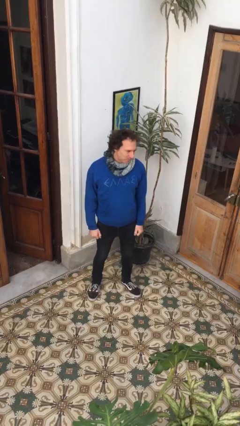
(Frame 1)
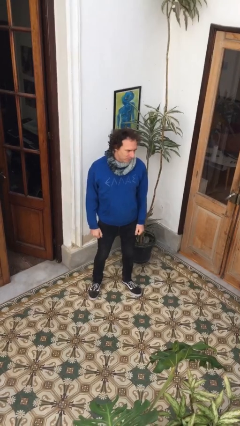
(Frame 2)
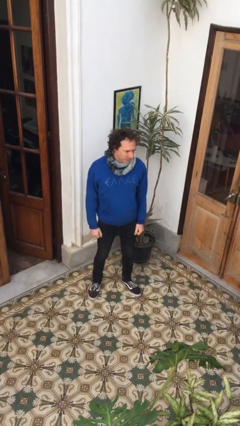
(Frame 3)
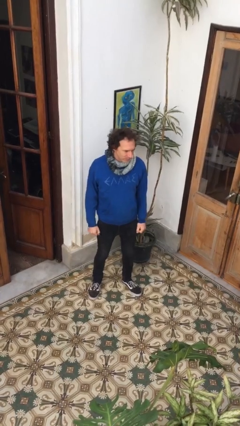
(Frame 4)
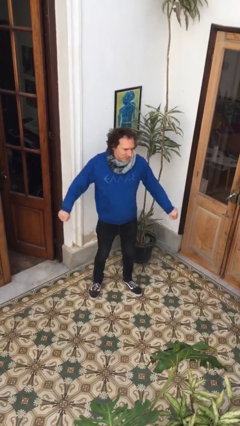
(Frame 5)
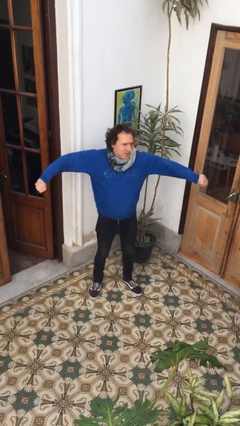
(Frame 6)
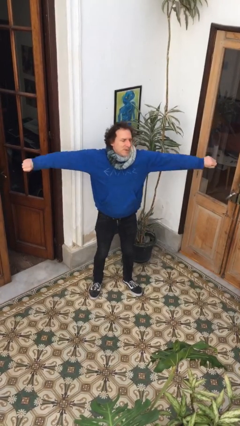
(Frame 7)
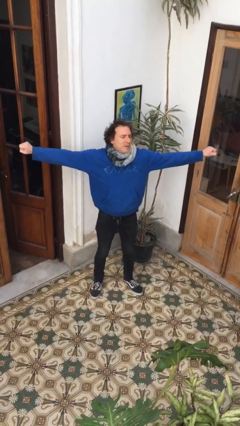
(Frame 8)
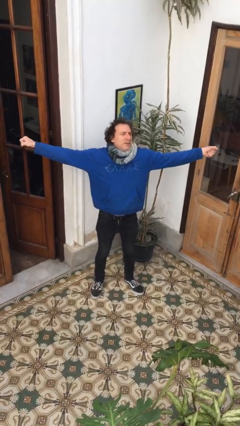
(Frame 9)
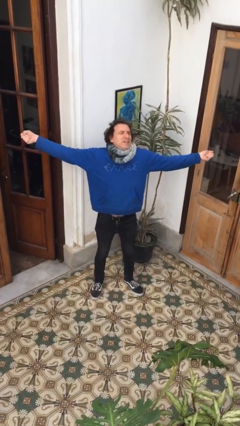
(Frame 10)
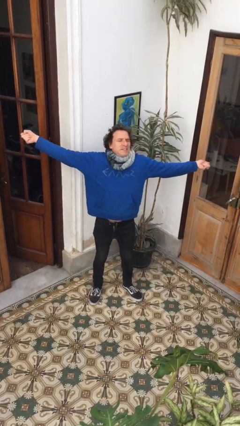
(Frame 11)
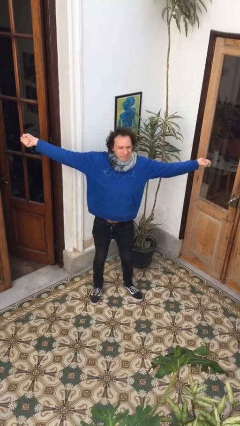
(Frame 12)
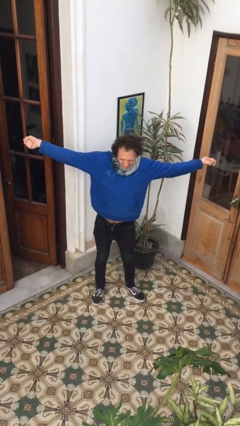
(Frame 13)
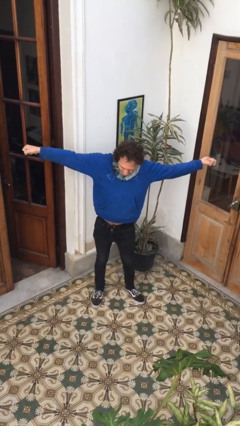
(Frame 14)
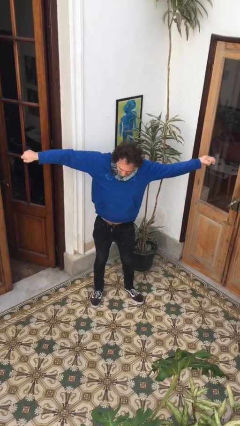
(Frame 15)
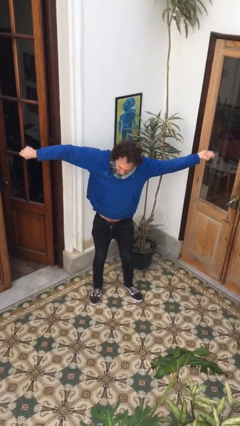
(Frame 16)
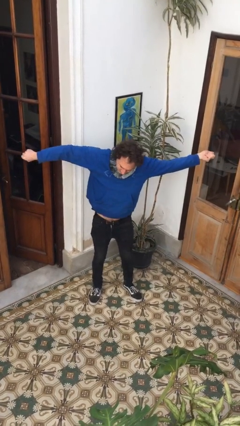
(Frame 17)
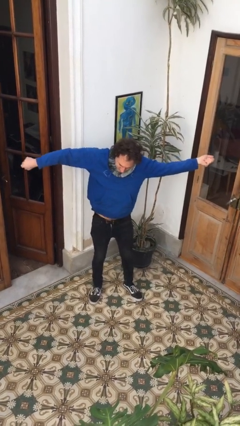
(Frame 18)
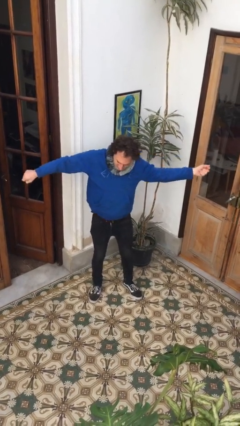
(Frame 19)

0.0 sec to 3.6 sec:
person stretches arms to side

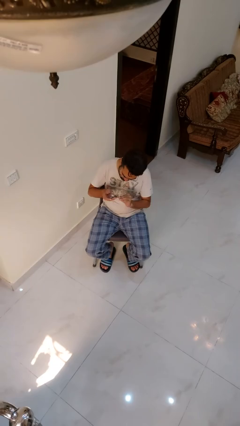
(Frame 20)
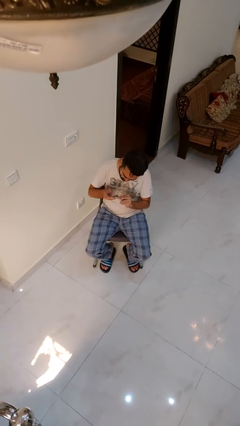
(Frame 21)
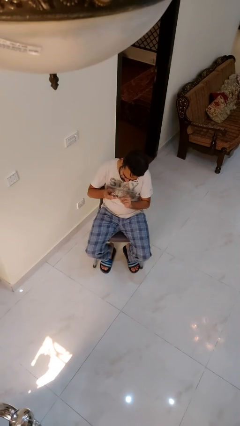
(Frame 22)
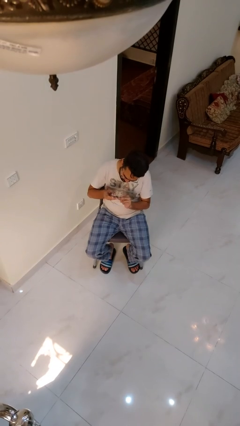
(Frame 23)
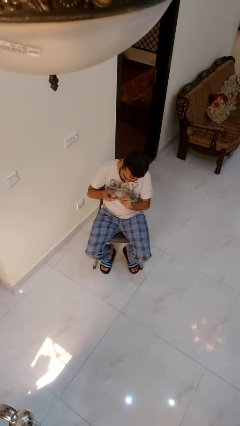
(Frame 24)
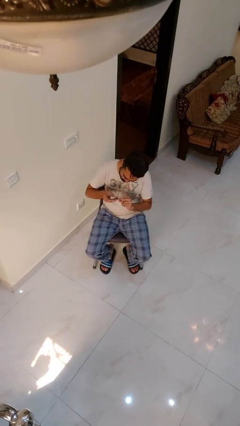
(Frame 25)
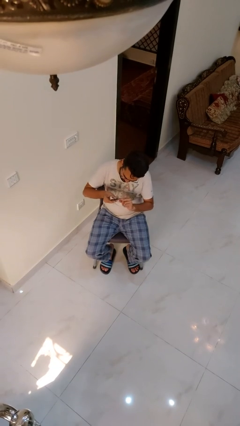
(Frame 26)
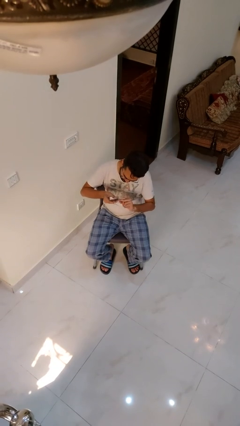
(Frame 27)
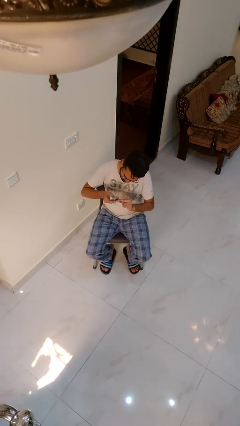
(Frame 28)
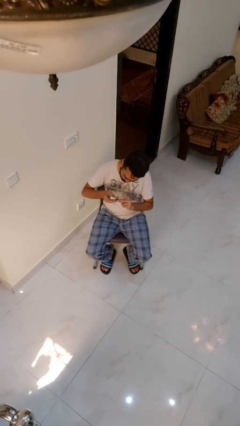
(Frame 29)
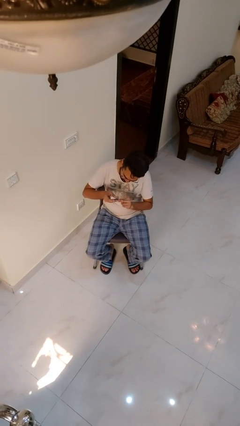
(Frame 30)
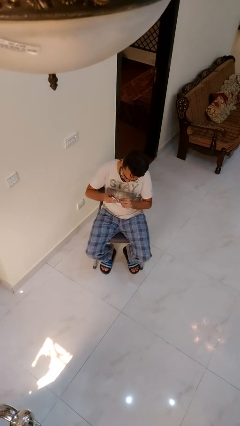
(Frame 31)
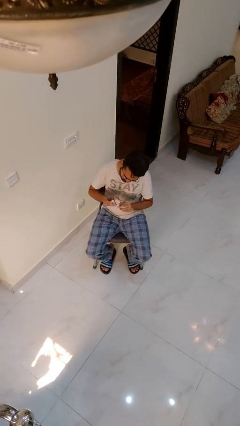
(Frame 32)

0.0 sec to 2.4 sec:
person clips fingernails

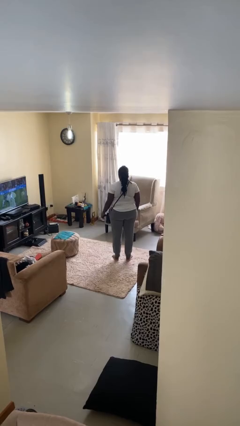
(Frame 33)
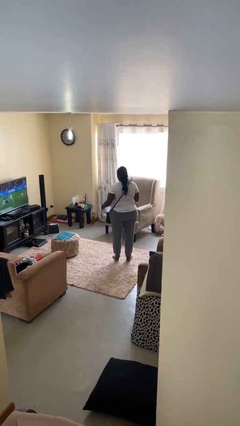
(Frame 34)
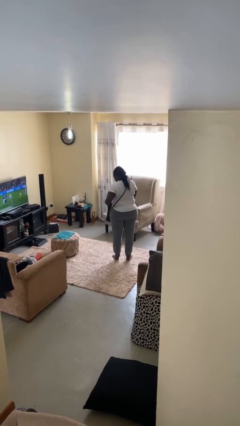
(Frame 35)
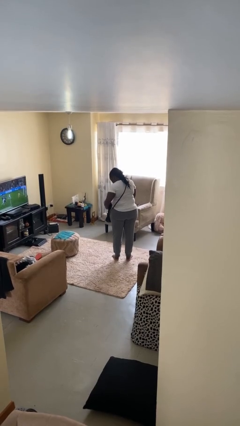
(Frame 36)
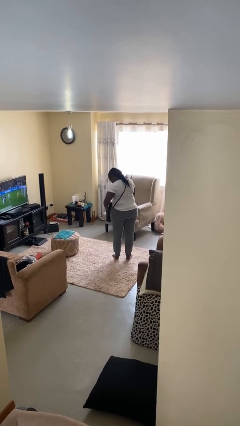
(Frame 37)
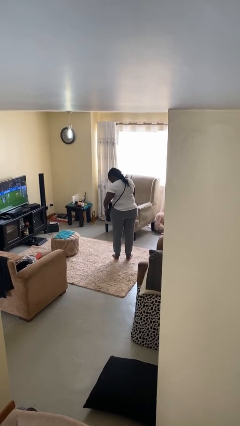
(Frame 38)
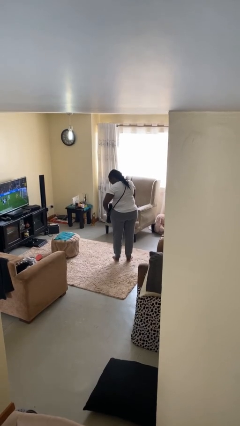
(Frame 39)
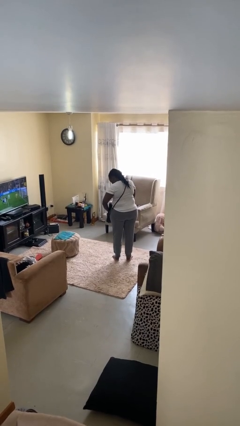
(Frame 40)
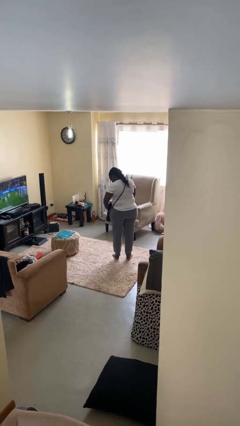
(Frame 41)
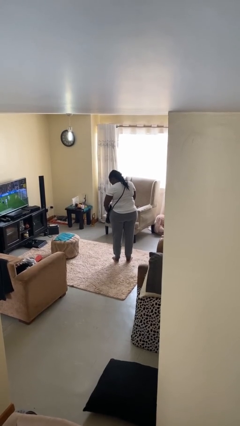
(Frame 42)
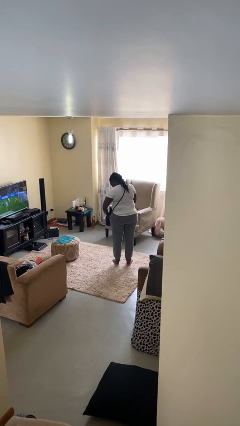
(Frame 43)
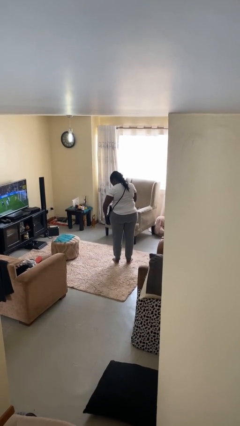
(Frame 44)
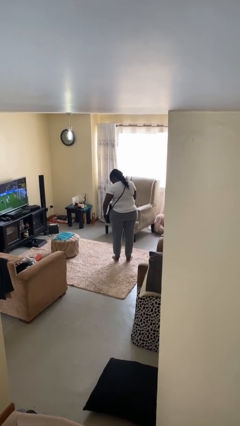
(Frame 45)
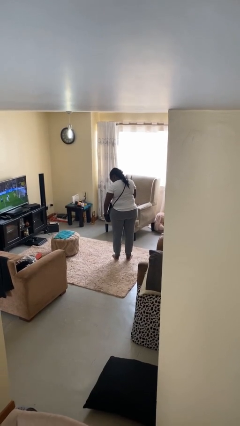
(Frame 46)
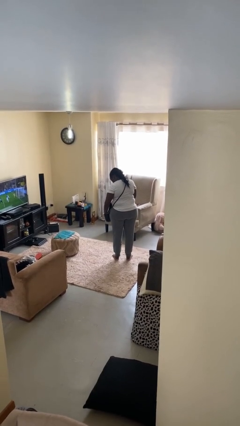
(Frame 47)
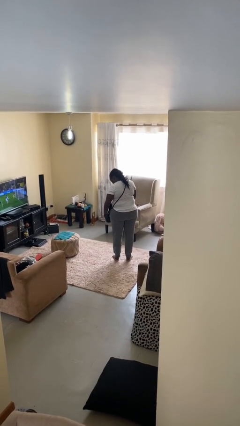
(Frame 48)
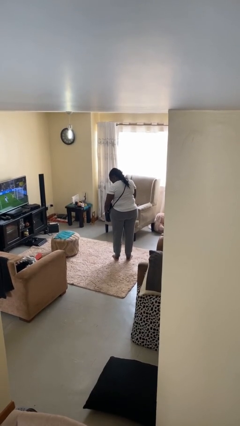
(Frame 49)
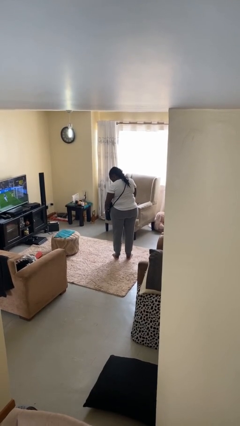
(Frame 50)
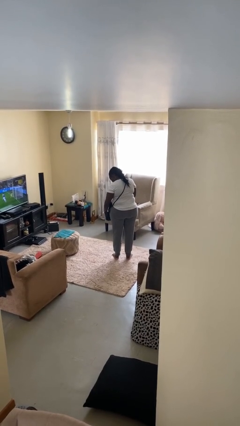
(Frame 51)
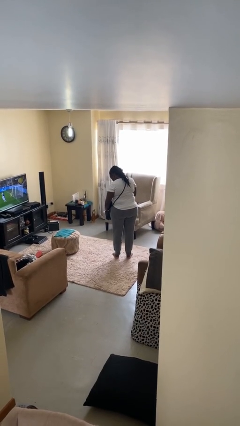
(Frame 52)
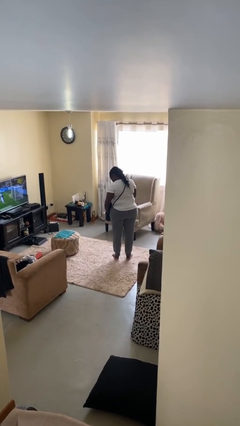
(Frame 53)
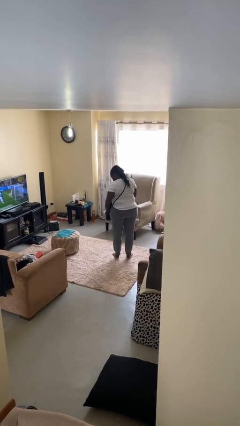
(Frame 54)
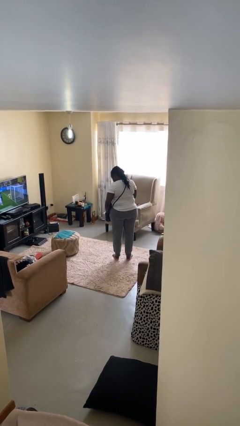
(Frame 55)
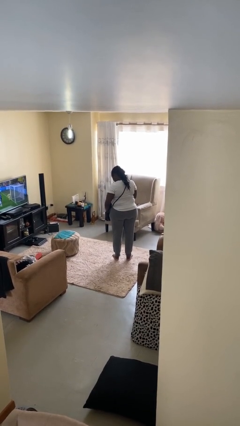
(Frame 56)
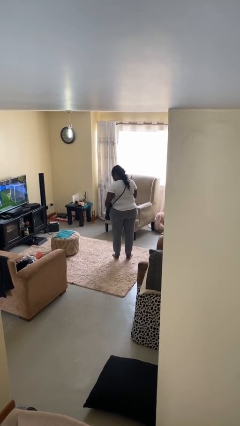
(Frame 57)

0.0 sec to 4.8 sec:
person searches in purse

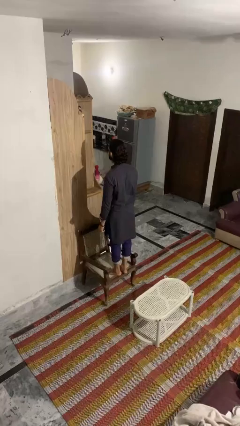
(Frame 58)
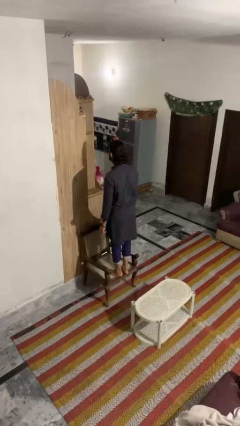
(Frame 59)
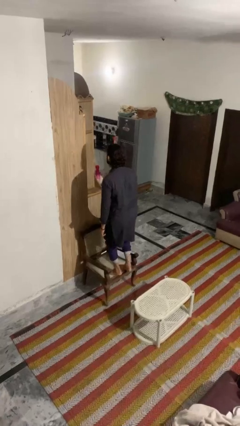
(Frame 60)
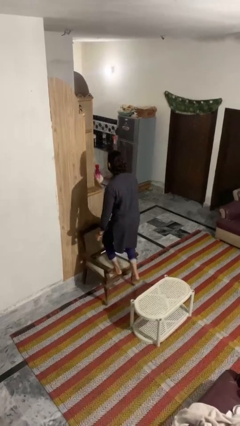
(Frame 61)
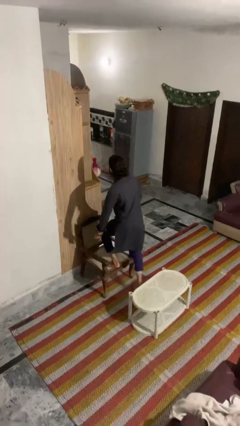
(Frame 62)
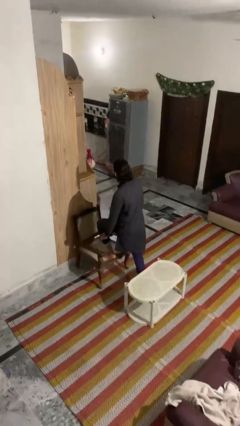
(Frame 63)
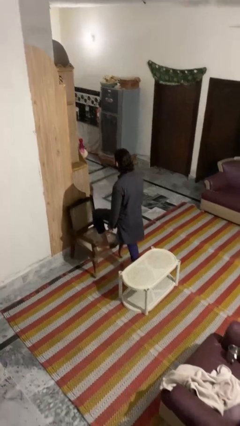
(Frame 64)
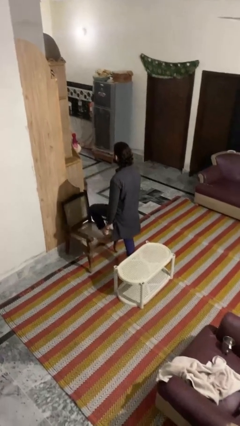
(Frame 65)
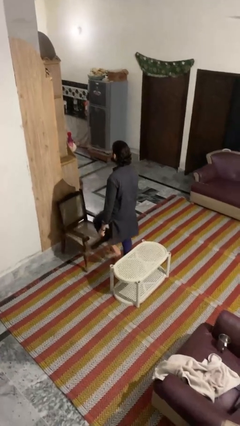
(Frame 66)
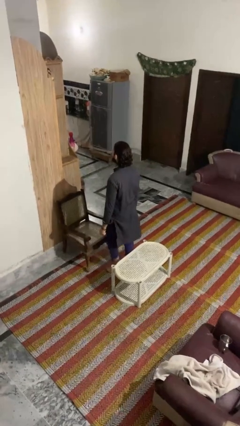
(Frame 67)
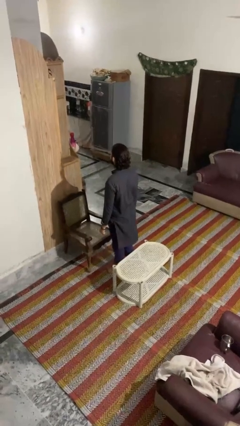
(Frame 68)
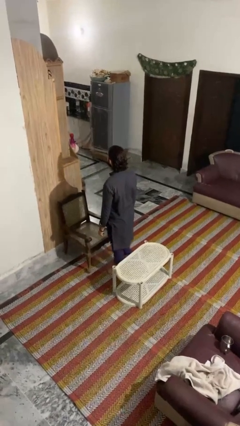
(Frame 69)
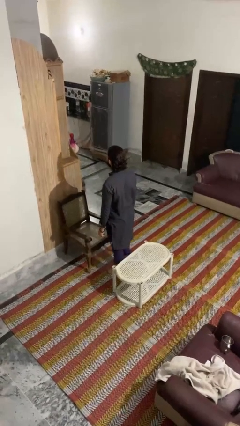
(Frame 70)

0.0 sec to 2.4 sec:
person climbs off chair

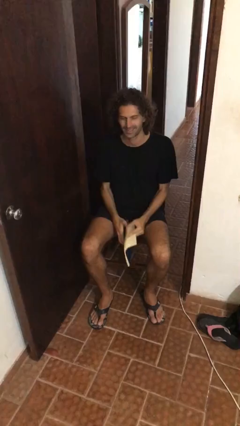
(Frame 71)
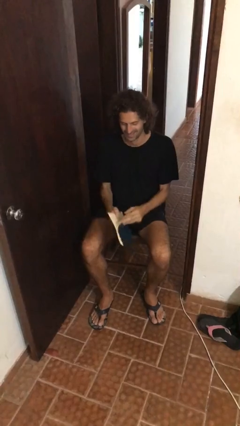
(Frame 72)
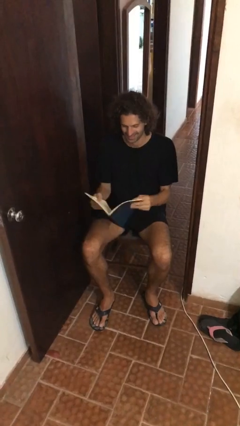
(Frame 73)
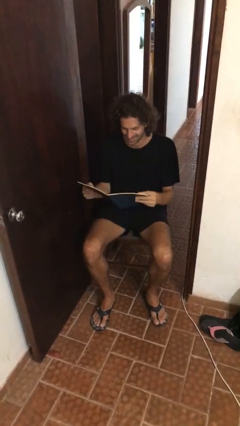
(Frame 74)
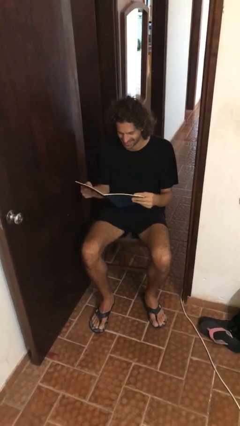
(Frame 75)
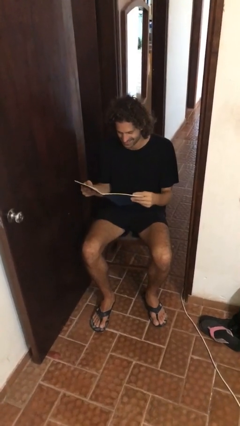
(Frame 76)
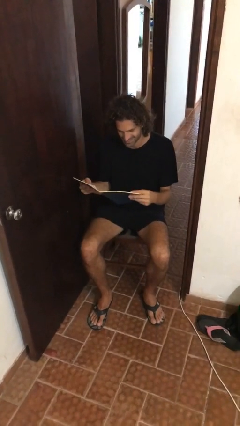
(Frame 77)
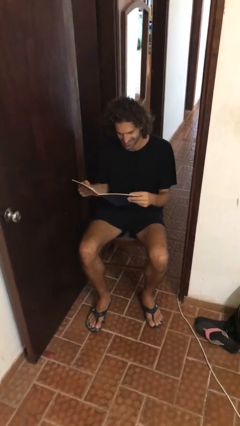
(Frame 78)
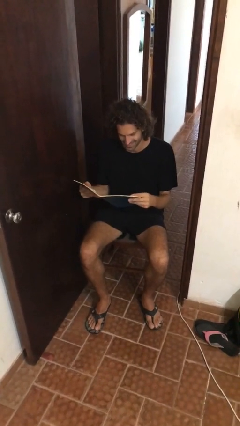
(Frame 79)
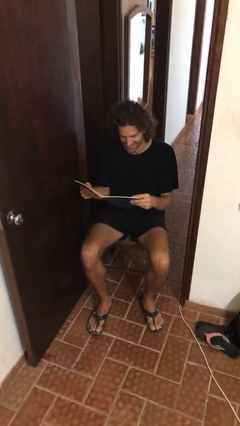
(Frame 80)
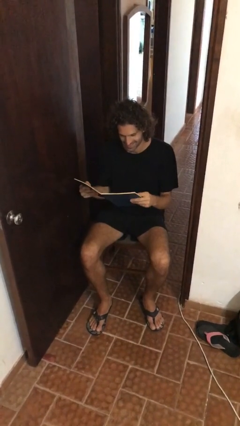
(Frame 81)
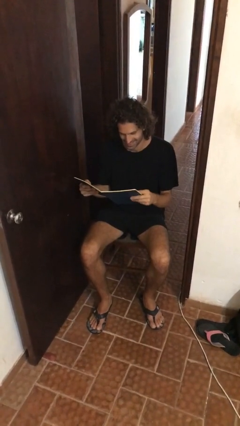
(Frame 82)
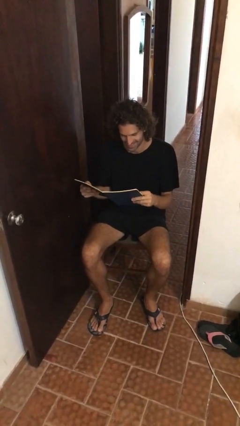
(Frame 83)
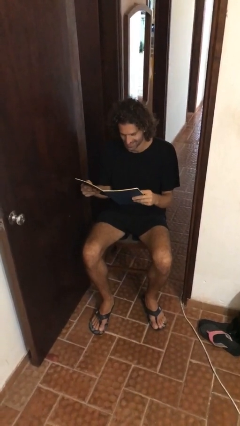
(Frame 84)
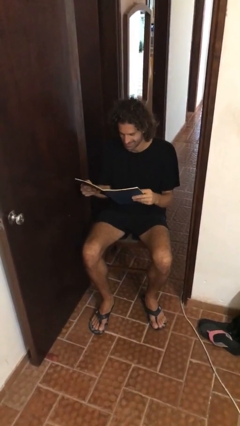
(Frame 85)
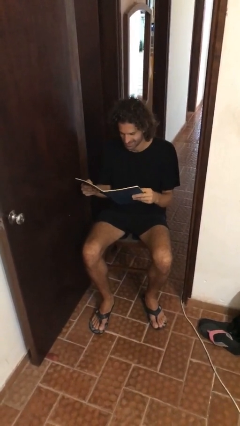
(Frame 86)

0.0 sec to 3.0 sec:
person reads document

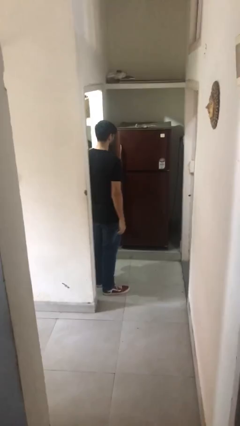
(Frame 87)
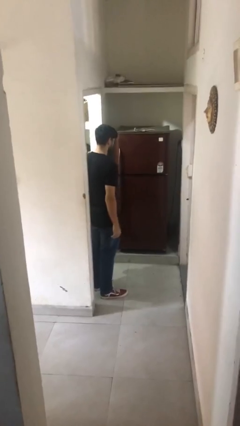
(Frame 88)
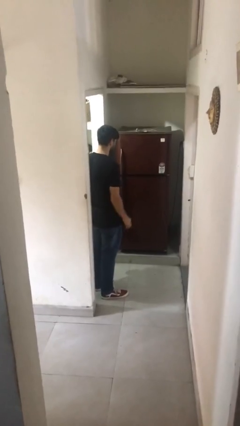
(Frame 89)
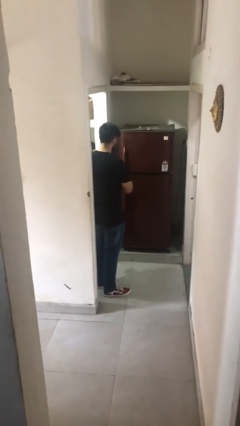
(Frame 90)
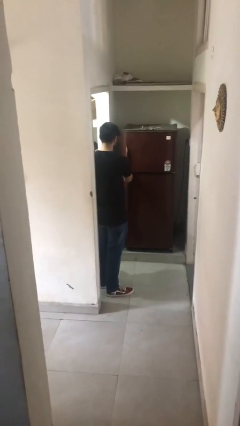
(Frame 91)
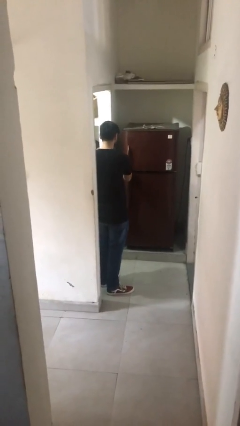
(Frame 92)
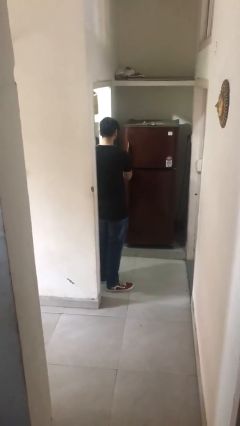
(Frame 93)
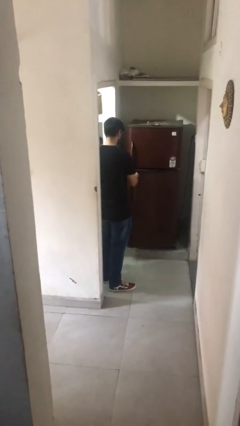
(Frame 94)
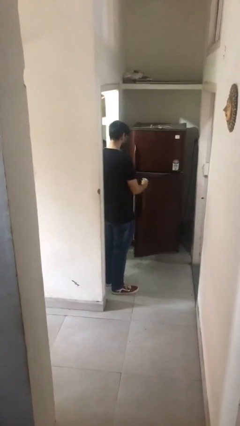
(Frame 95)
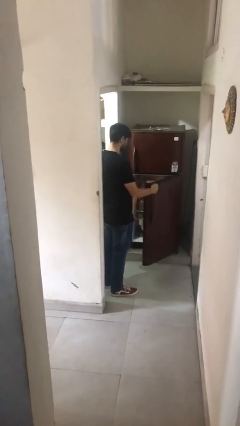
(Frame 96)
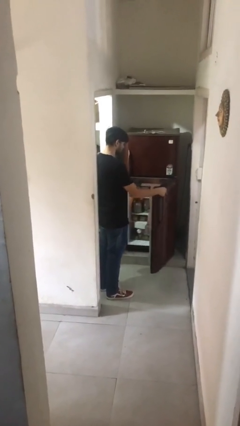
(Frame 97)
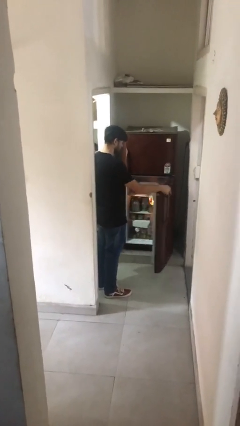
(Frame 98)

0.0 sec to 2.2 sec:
person opens refrigerator
